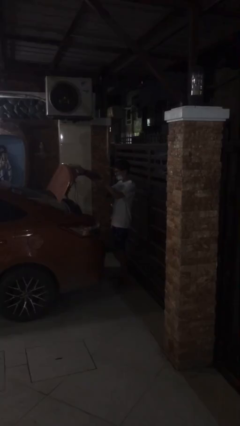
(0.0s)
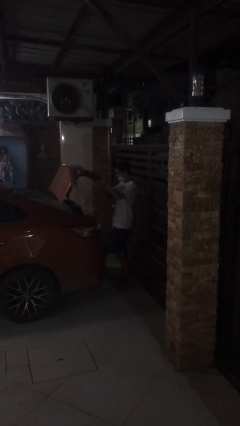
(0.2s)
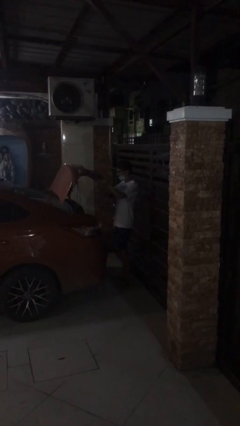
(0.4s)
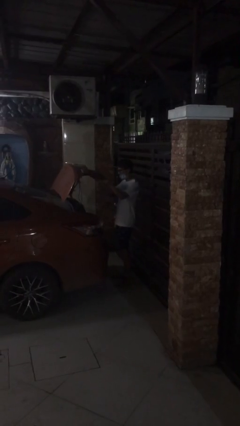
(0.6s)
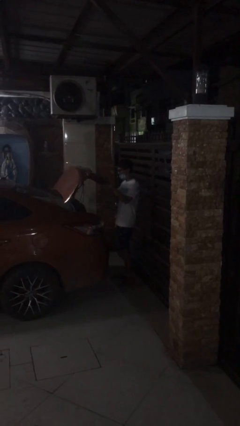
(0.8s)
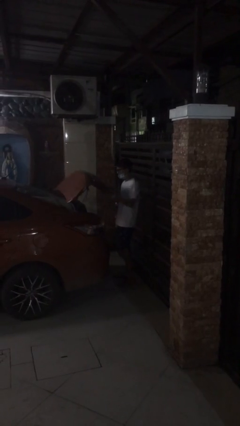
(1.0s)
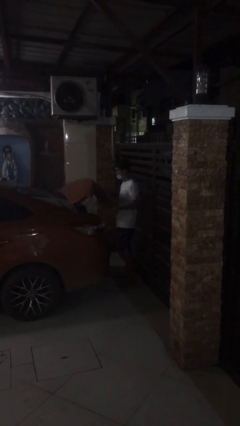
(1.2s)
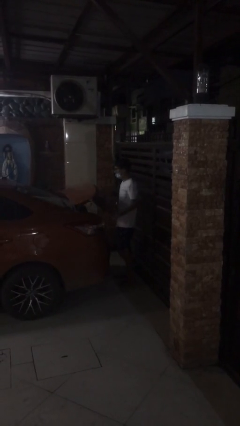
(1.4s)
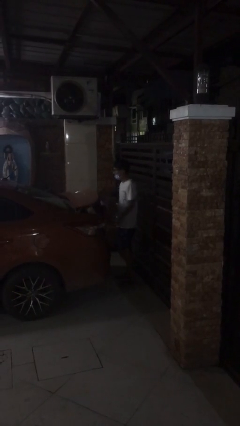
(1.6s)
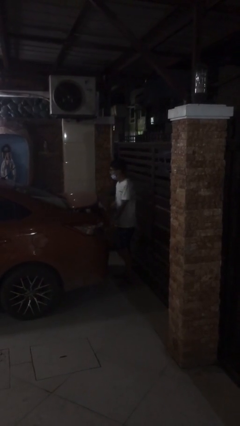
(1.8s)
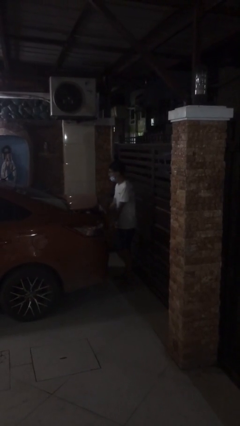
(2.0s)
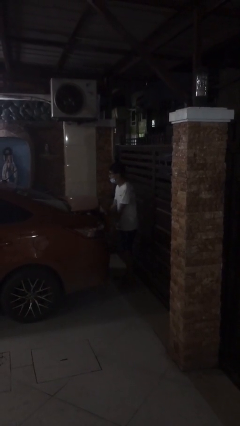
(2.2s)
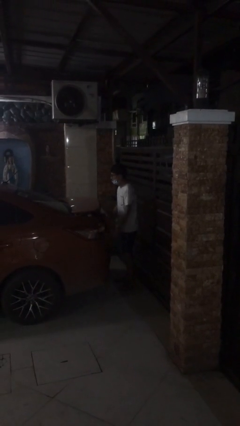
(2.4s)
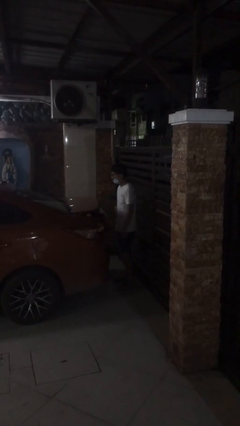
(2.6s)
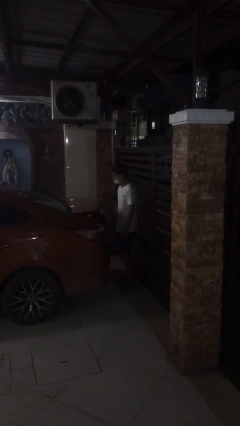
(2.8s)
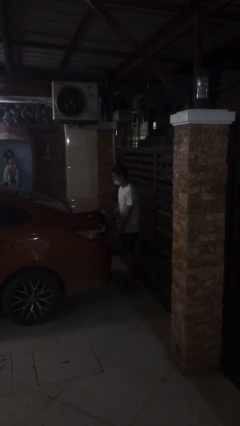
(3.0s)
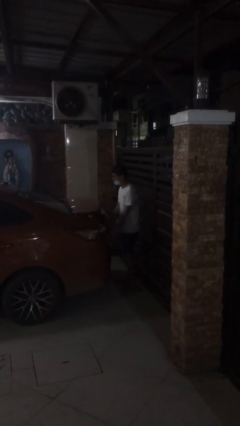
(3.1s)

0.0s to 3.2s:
person closes car trunk

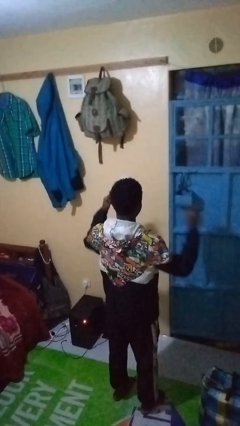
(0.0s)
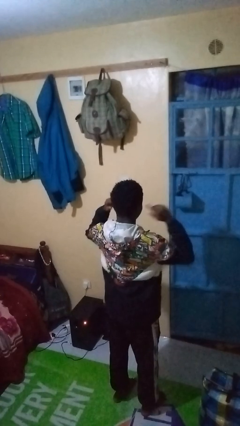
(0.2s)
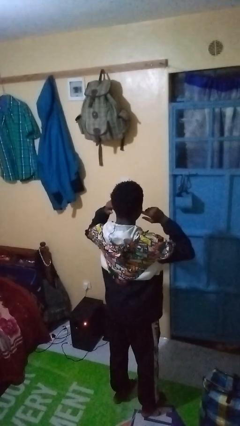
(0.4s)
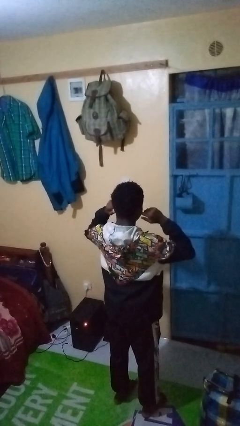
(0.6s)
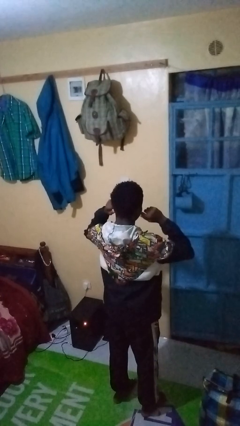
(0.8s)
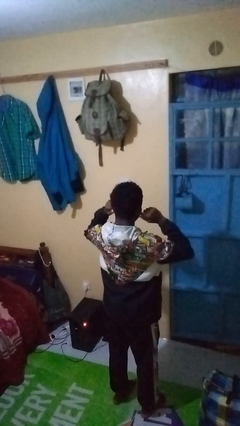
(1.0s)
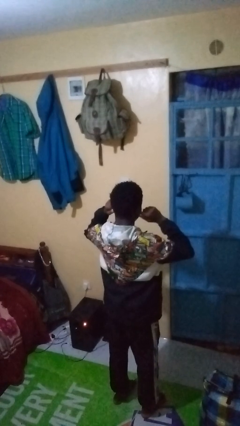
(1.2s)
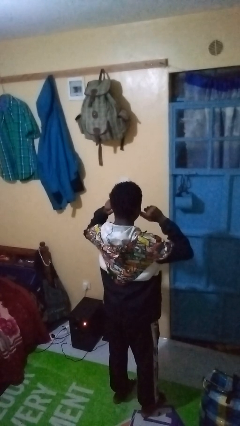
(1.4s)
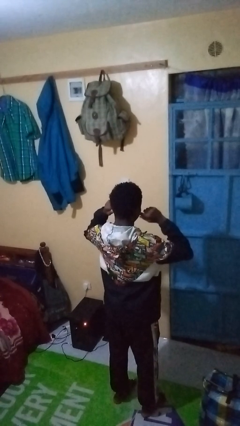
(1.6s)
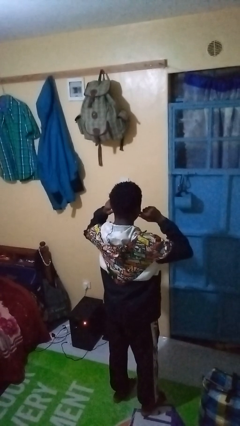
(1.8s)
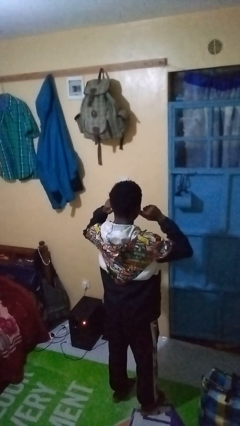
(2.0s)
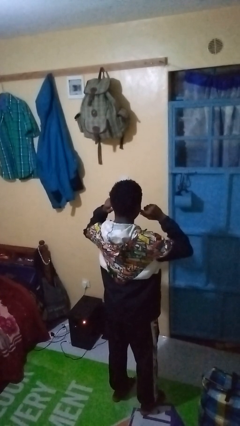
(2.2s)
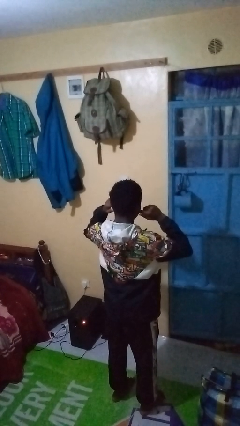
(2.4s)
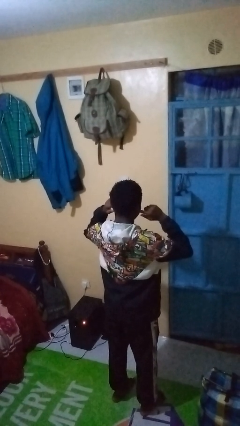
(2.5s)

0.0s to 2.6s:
person puts fingers in ear

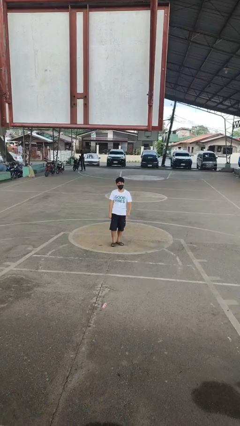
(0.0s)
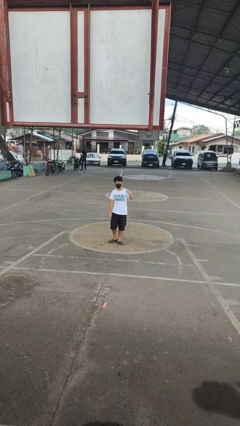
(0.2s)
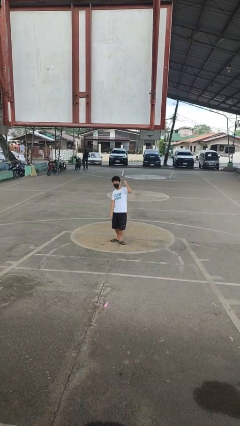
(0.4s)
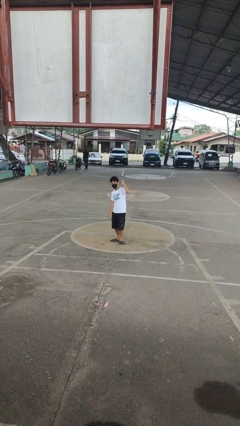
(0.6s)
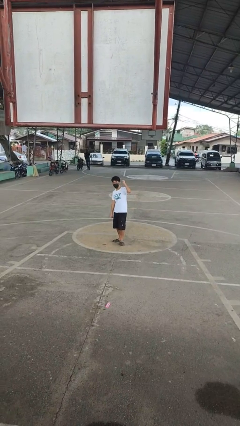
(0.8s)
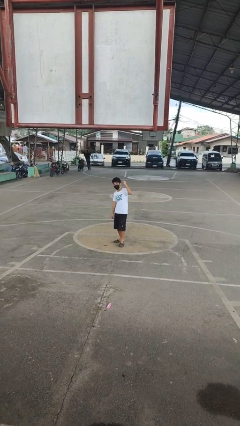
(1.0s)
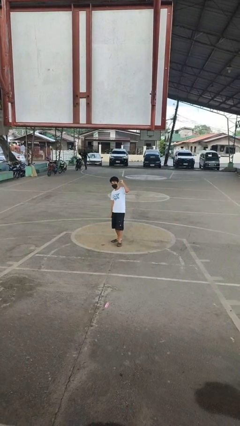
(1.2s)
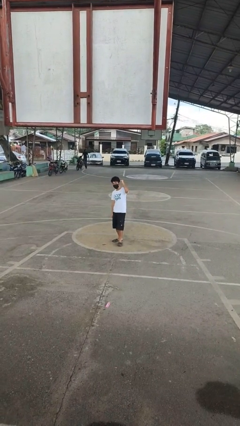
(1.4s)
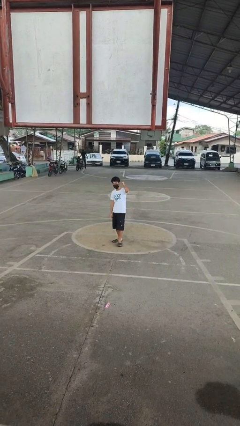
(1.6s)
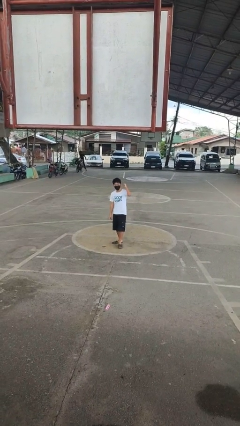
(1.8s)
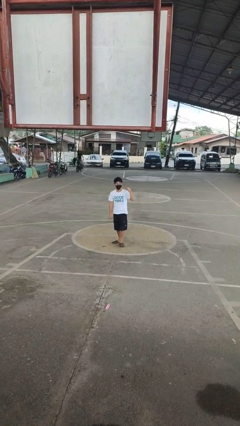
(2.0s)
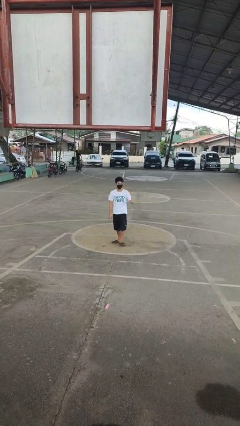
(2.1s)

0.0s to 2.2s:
person gestures behind me

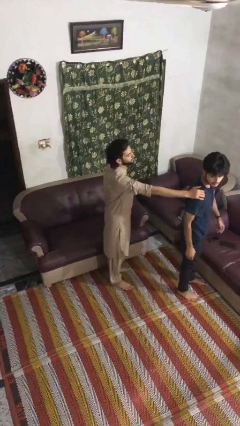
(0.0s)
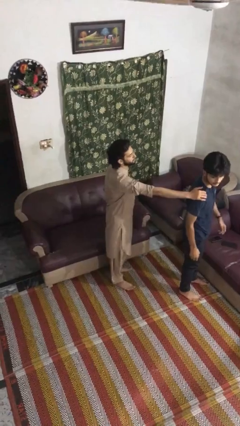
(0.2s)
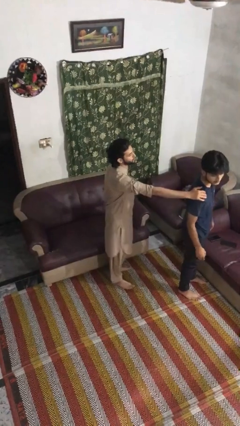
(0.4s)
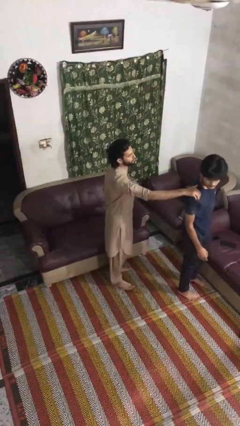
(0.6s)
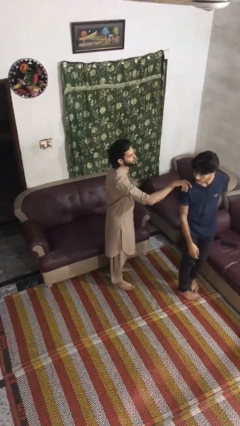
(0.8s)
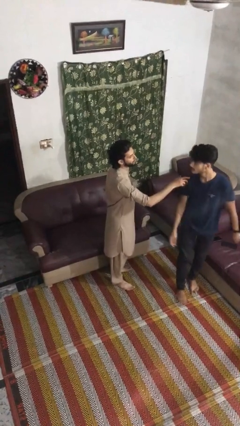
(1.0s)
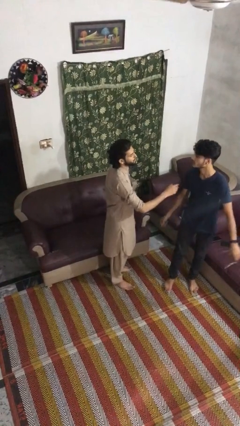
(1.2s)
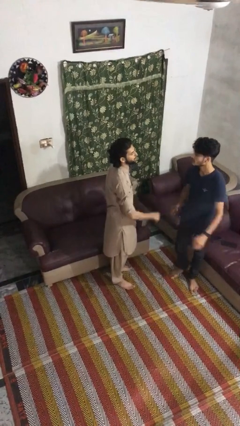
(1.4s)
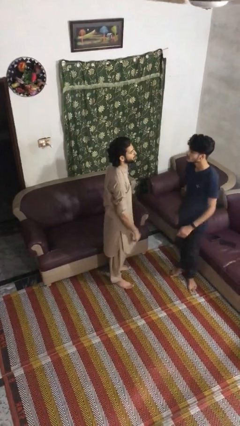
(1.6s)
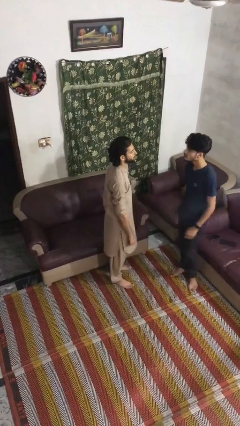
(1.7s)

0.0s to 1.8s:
person spins person around

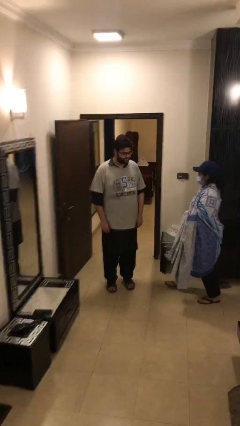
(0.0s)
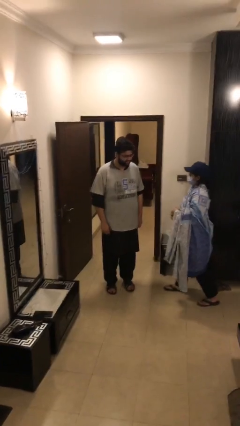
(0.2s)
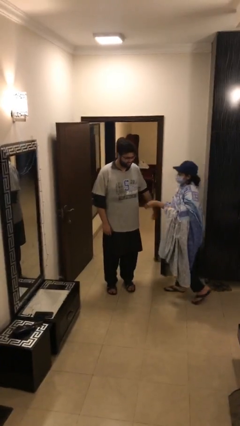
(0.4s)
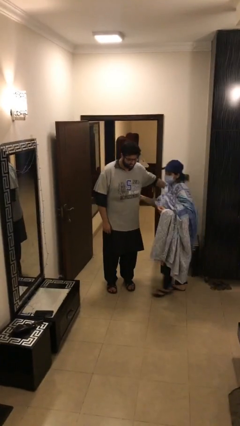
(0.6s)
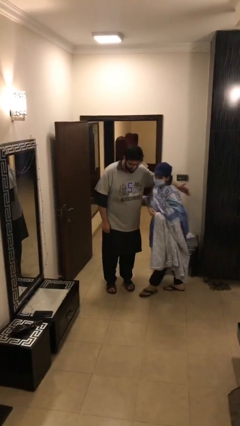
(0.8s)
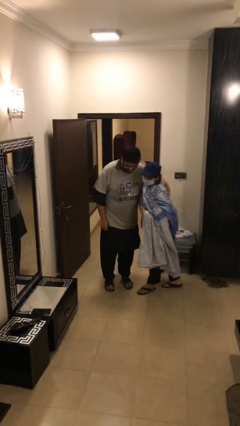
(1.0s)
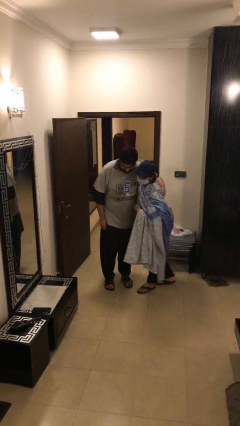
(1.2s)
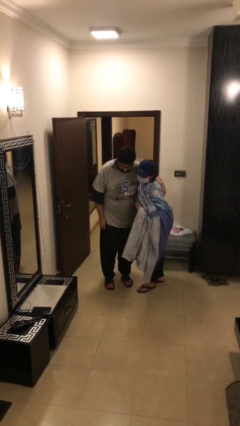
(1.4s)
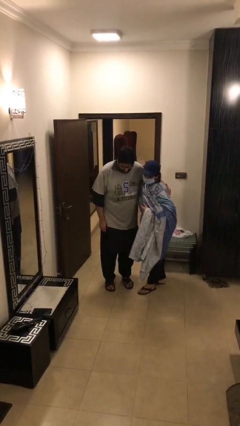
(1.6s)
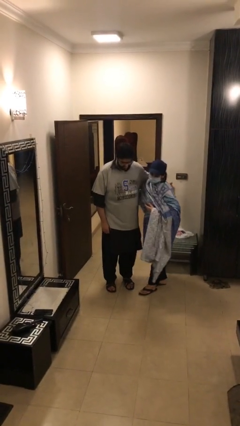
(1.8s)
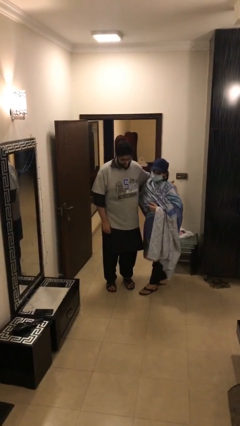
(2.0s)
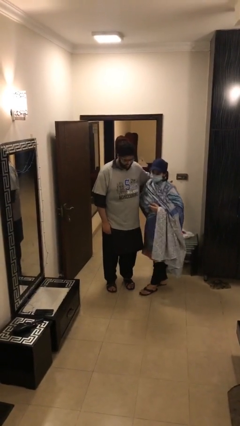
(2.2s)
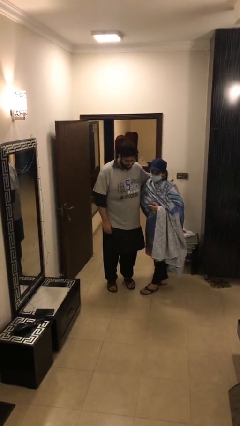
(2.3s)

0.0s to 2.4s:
person embraces person

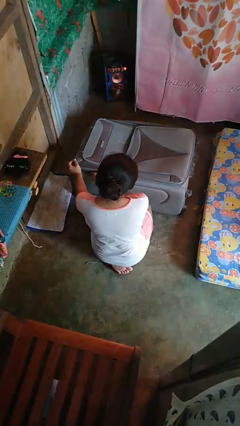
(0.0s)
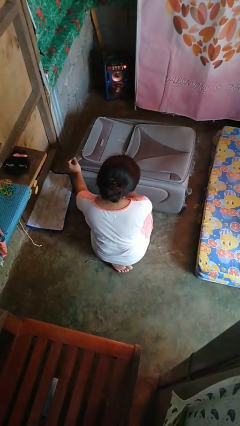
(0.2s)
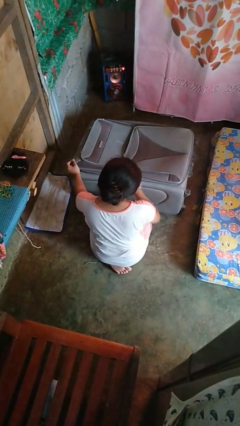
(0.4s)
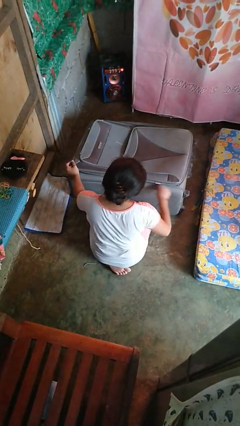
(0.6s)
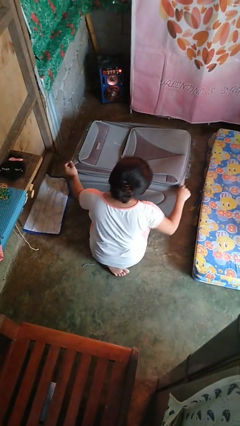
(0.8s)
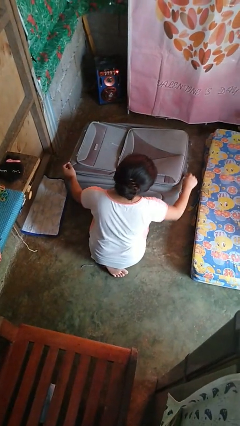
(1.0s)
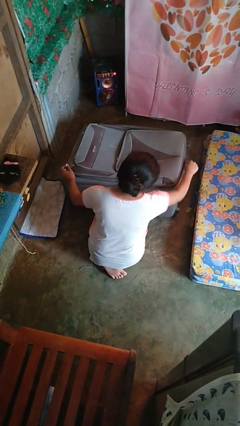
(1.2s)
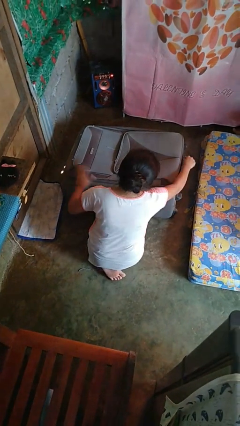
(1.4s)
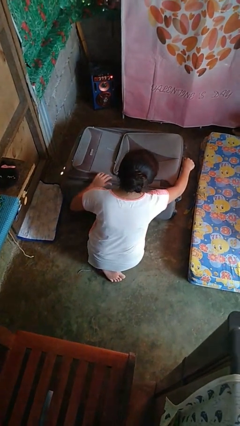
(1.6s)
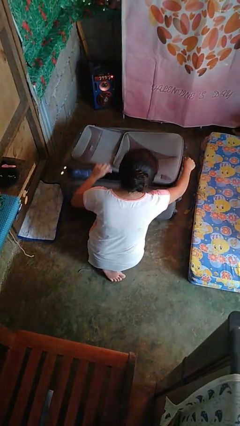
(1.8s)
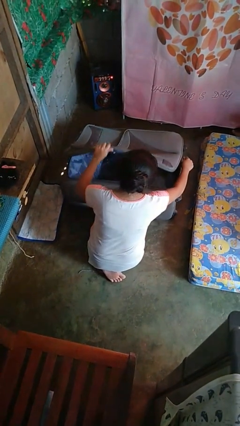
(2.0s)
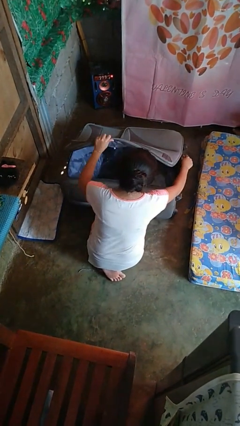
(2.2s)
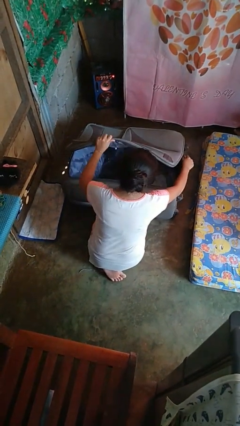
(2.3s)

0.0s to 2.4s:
person opens suitcase

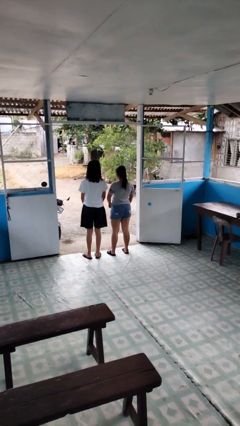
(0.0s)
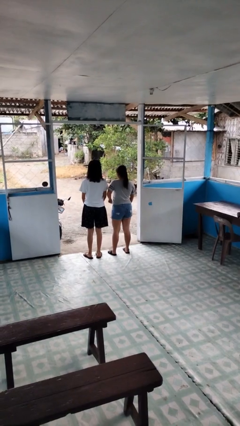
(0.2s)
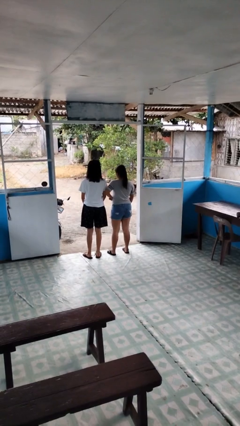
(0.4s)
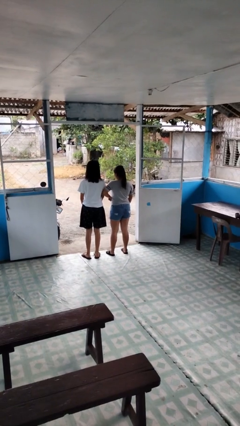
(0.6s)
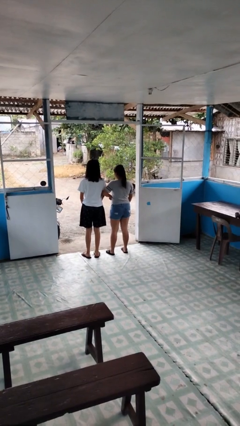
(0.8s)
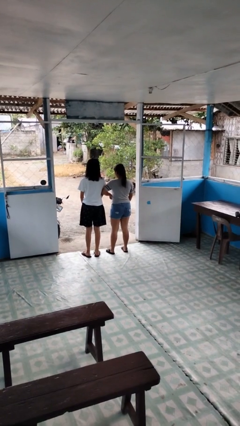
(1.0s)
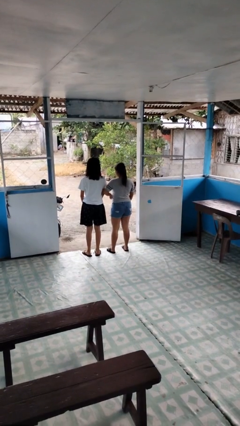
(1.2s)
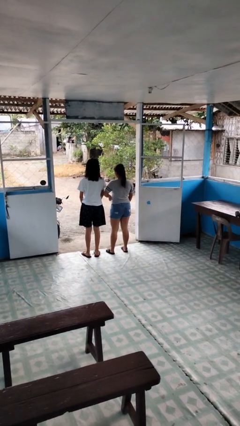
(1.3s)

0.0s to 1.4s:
person nudges person with elbow

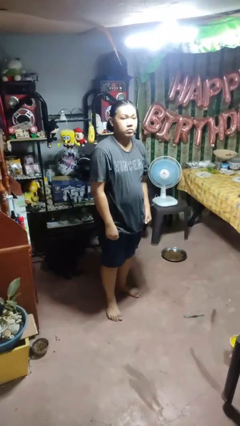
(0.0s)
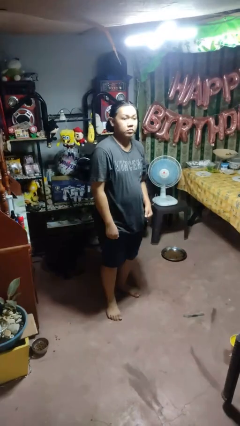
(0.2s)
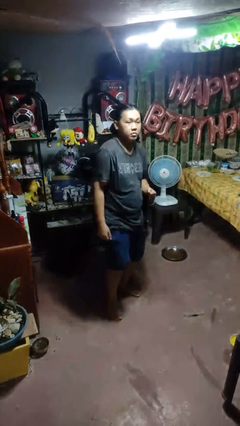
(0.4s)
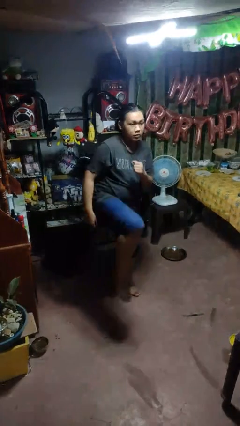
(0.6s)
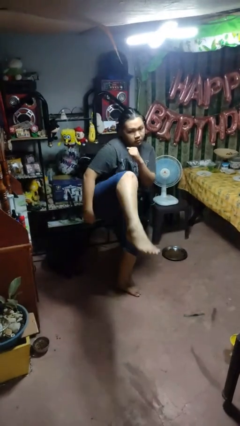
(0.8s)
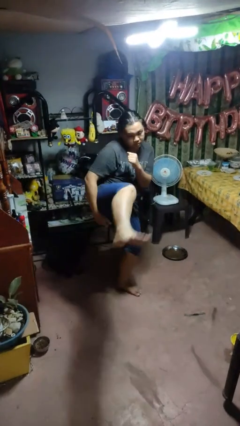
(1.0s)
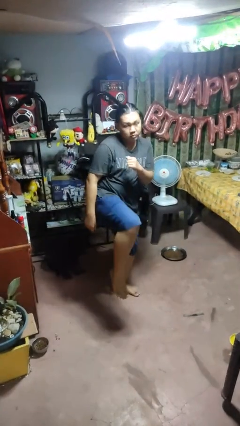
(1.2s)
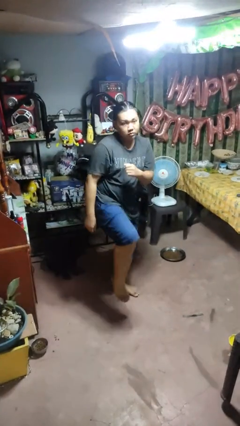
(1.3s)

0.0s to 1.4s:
person karate kicks
